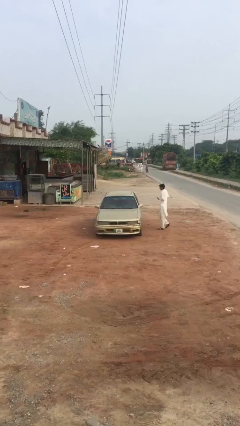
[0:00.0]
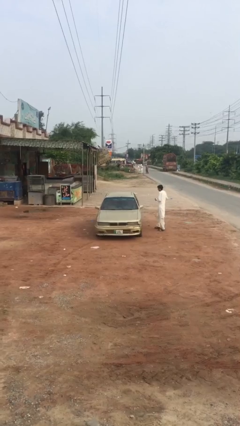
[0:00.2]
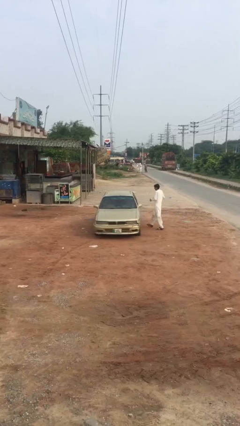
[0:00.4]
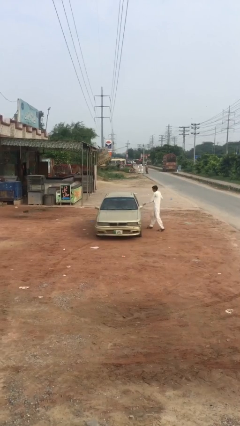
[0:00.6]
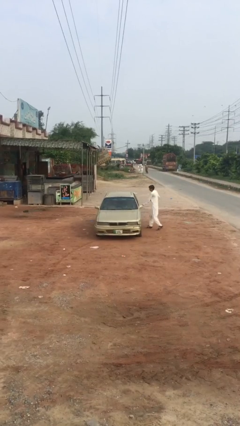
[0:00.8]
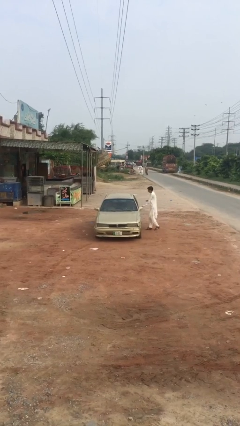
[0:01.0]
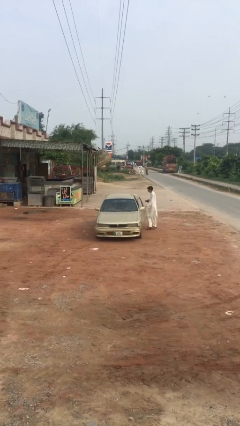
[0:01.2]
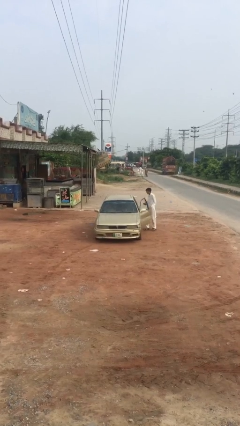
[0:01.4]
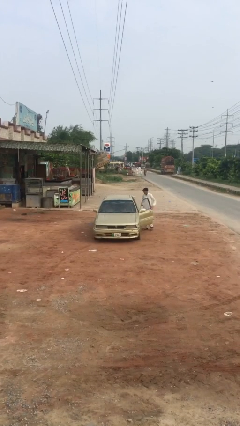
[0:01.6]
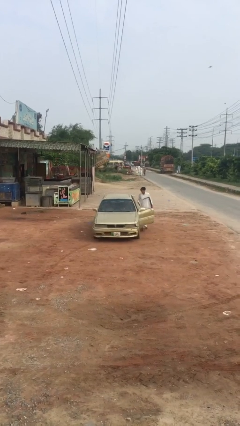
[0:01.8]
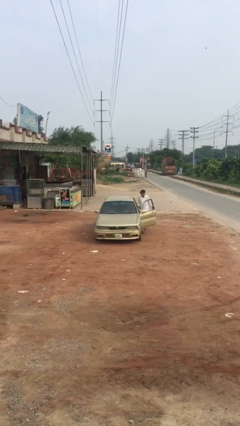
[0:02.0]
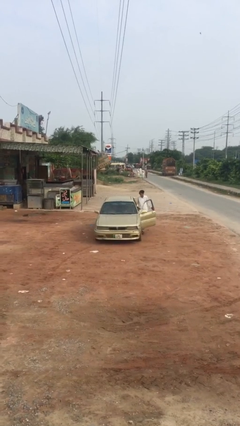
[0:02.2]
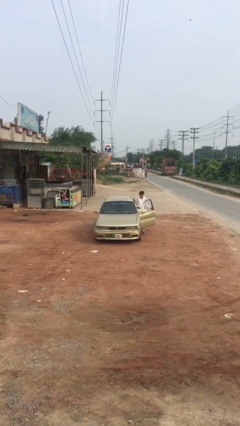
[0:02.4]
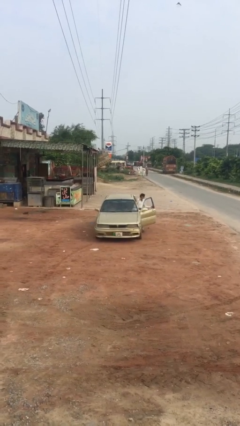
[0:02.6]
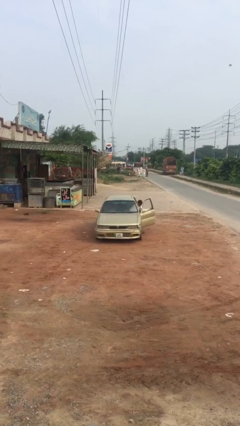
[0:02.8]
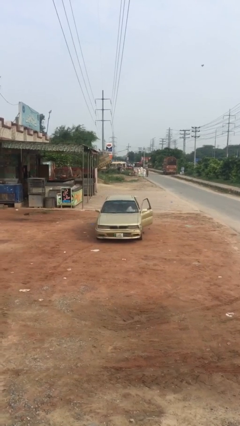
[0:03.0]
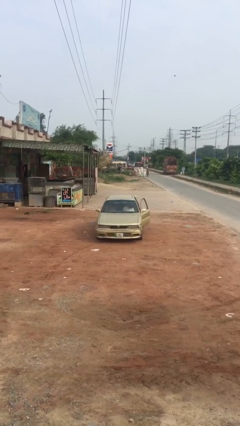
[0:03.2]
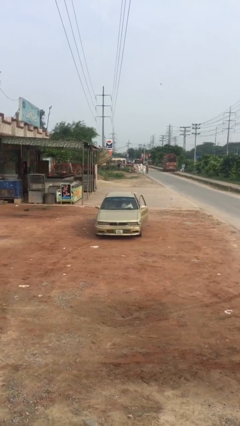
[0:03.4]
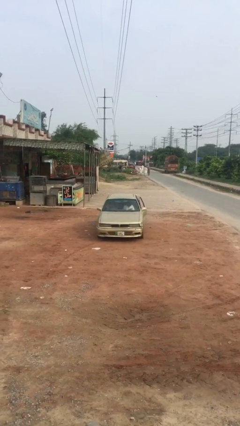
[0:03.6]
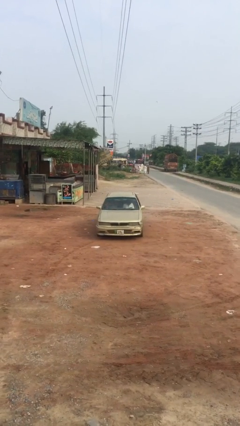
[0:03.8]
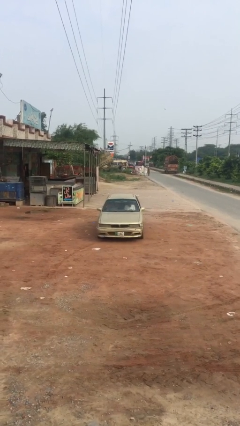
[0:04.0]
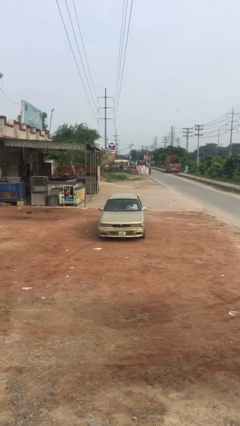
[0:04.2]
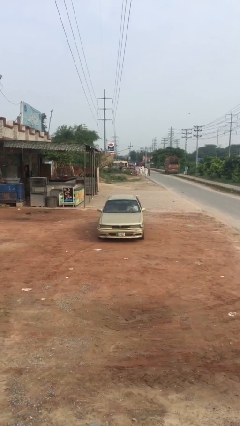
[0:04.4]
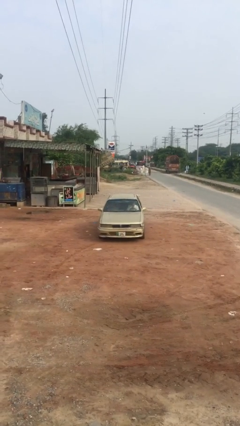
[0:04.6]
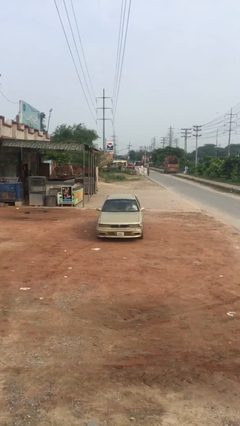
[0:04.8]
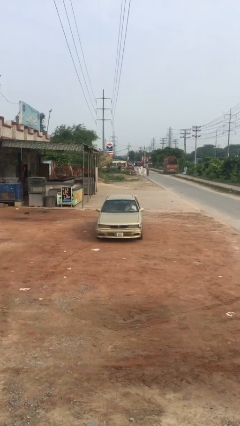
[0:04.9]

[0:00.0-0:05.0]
car picks up person

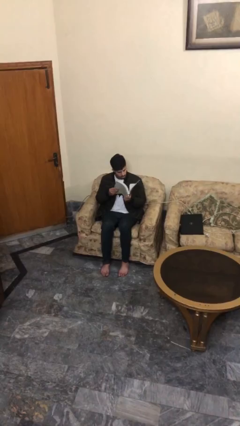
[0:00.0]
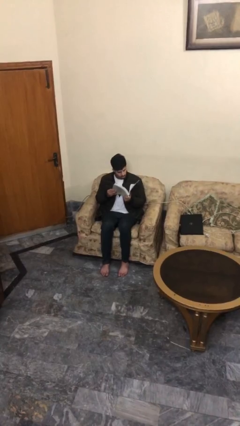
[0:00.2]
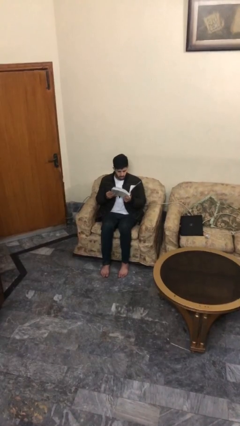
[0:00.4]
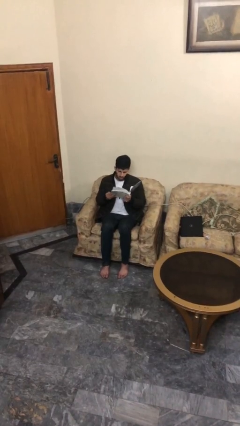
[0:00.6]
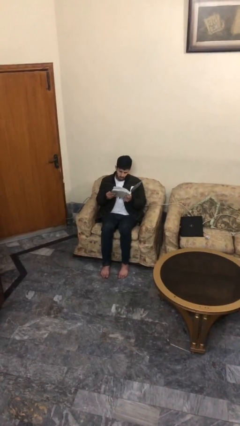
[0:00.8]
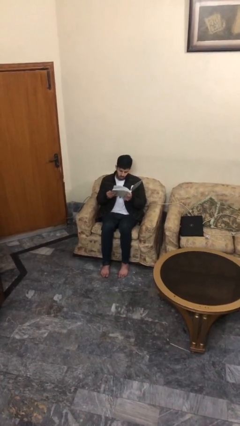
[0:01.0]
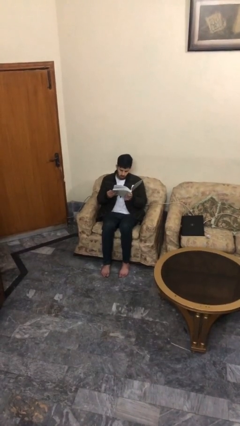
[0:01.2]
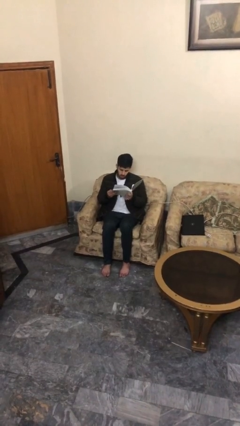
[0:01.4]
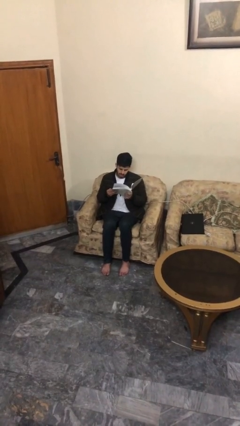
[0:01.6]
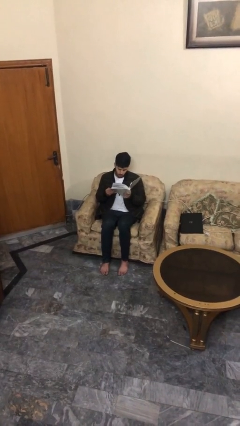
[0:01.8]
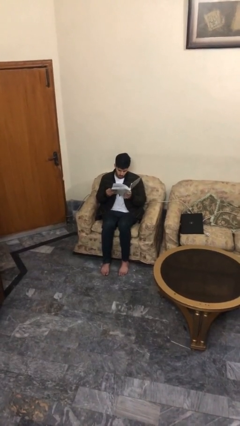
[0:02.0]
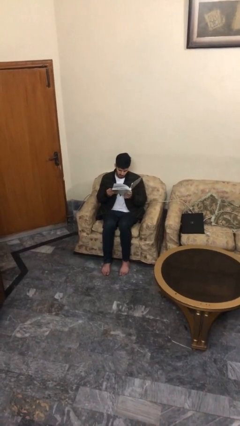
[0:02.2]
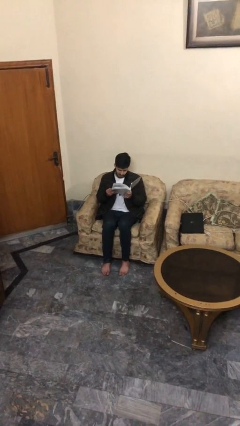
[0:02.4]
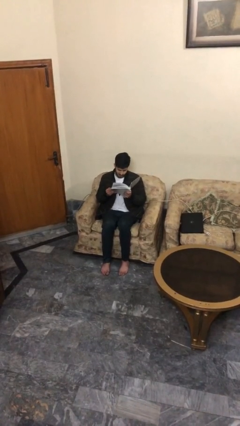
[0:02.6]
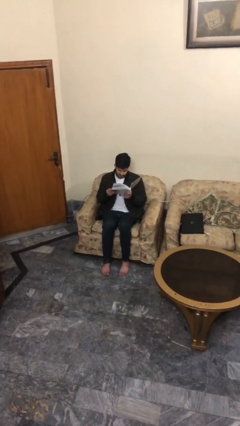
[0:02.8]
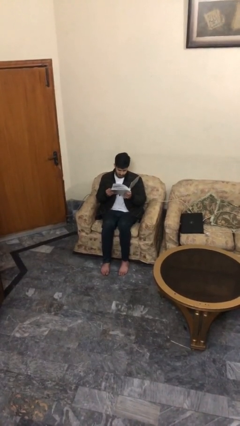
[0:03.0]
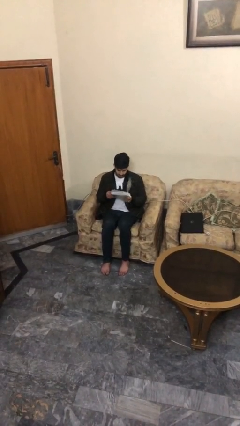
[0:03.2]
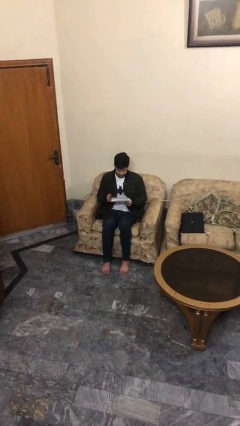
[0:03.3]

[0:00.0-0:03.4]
person reads document

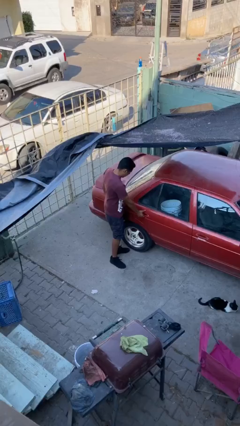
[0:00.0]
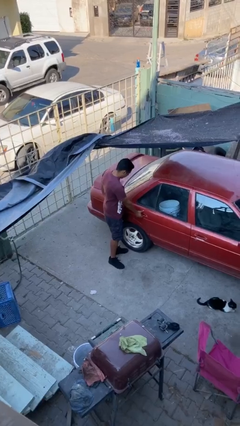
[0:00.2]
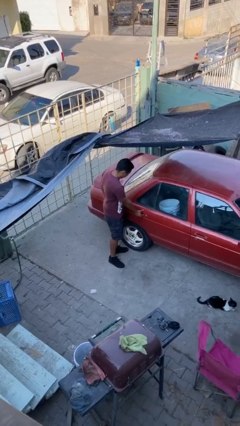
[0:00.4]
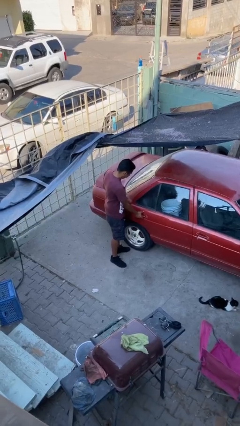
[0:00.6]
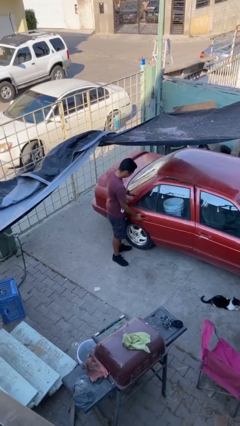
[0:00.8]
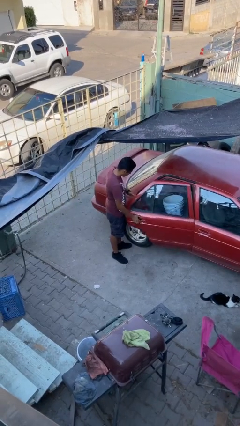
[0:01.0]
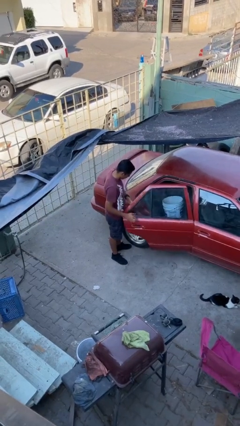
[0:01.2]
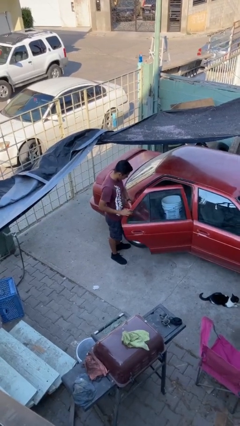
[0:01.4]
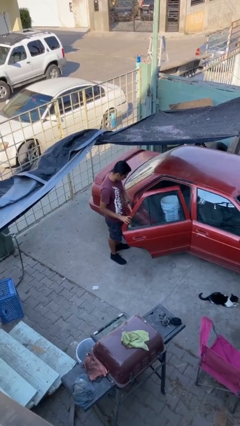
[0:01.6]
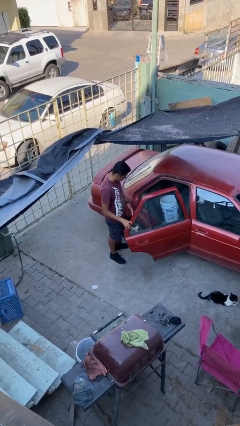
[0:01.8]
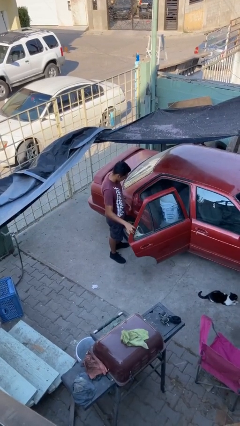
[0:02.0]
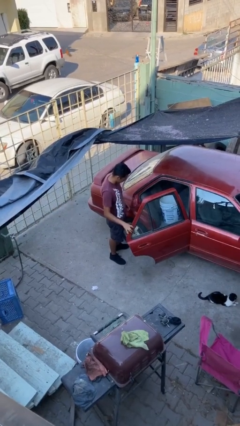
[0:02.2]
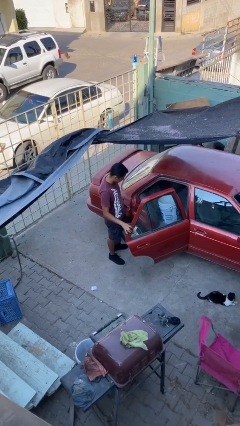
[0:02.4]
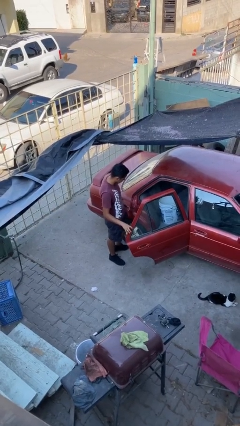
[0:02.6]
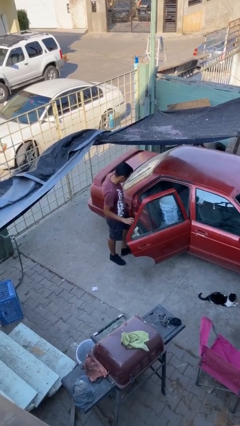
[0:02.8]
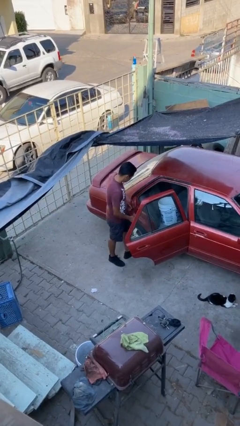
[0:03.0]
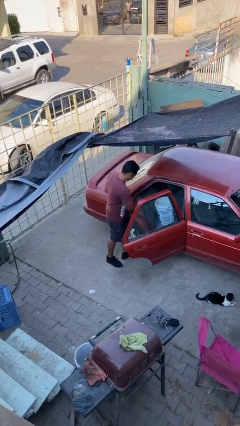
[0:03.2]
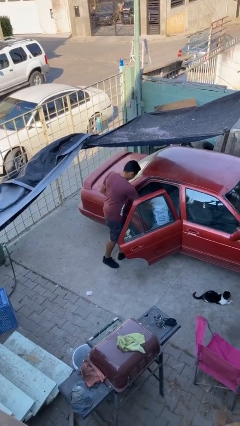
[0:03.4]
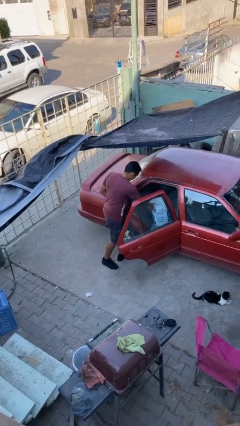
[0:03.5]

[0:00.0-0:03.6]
person opens car door

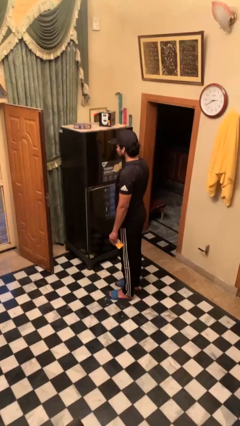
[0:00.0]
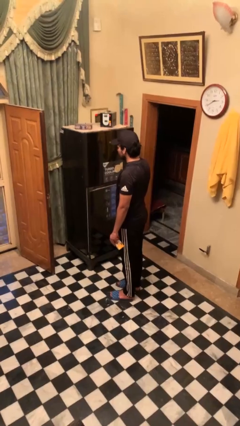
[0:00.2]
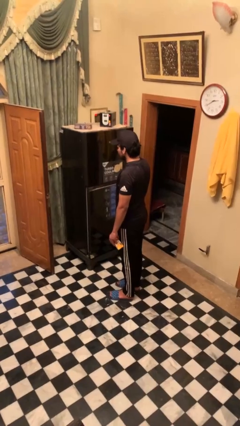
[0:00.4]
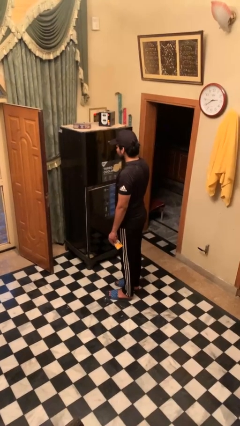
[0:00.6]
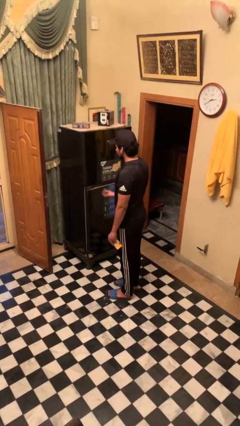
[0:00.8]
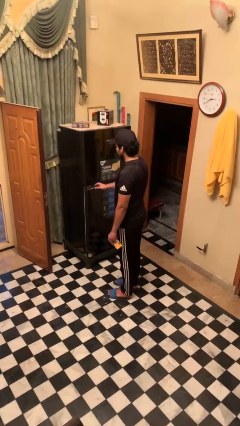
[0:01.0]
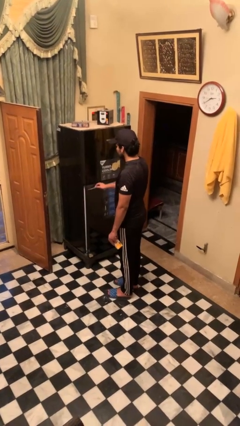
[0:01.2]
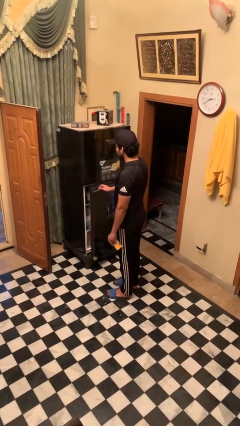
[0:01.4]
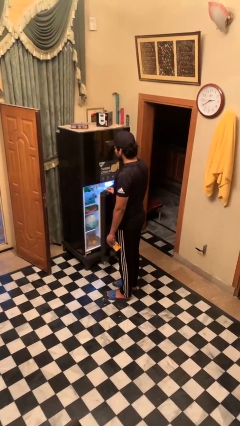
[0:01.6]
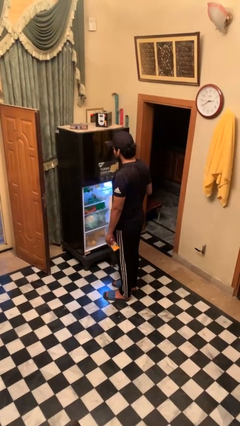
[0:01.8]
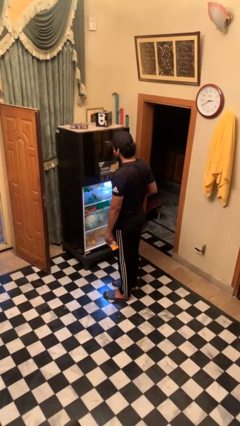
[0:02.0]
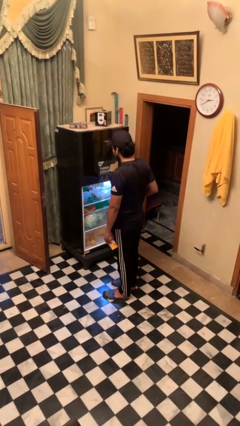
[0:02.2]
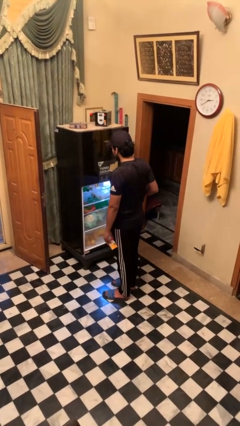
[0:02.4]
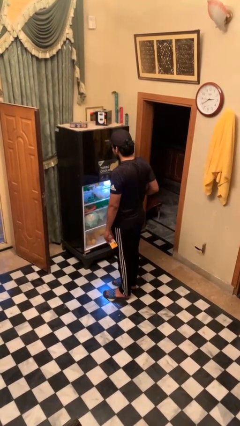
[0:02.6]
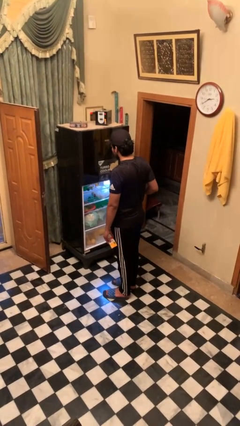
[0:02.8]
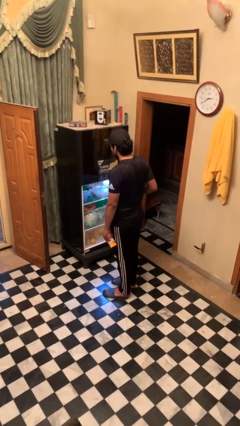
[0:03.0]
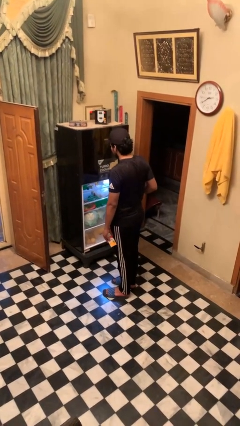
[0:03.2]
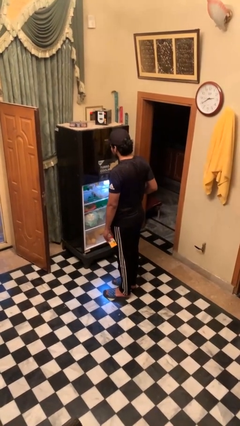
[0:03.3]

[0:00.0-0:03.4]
person opens refrigerator

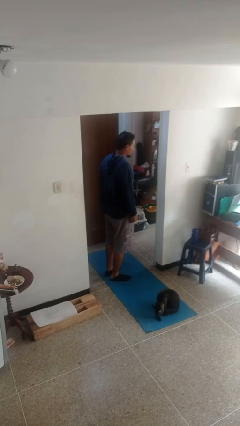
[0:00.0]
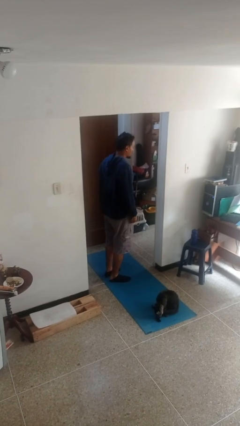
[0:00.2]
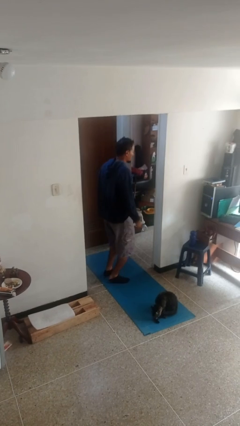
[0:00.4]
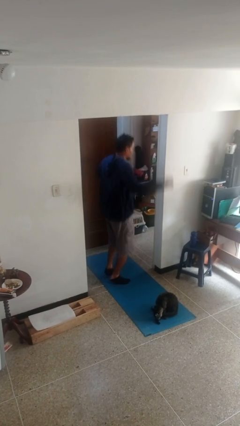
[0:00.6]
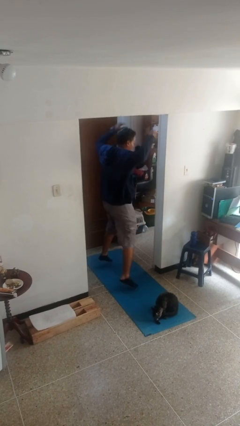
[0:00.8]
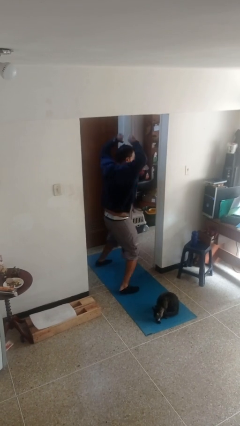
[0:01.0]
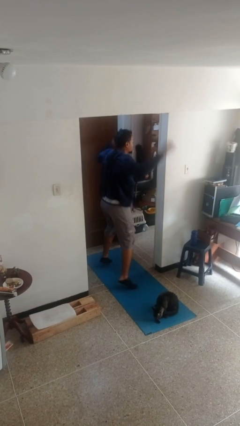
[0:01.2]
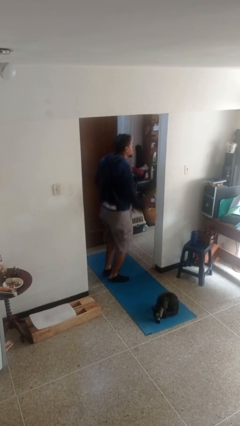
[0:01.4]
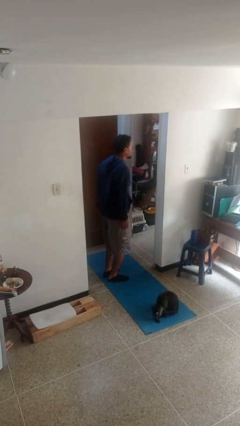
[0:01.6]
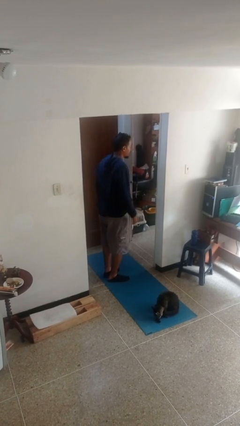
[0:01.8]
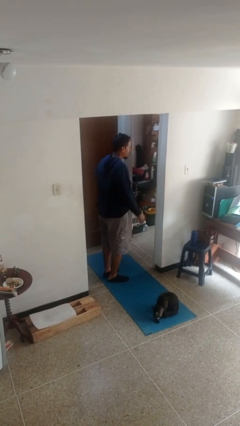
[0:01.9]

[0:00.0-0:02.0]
person exercises with jumping jacks
